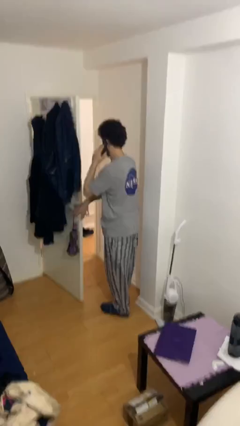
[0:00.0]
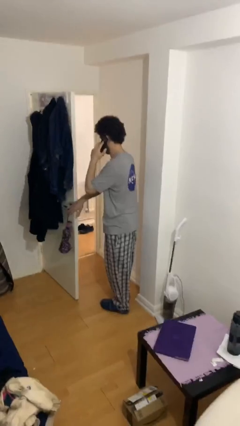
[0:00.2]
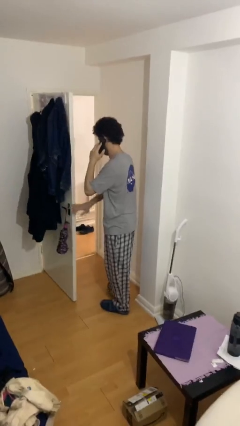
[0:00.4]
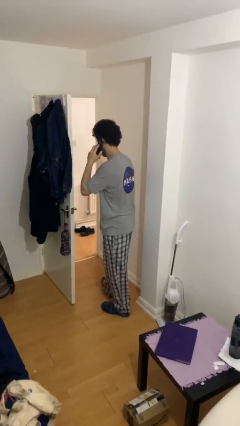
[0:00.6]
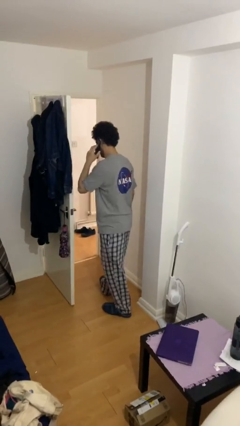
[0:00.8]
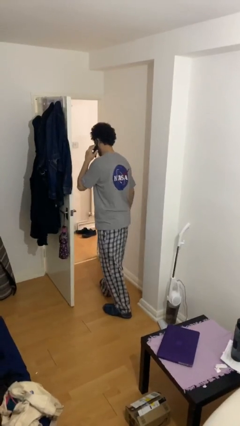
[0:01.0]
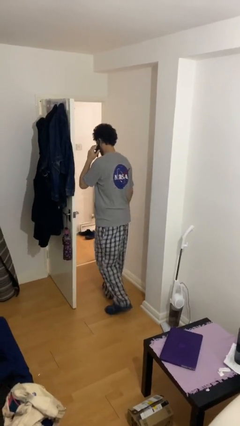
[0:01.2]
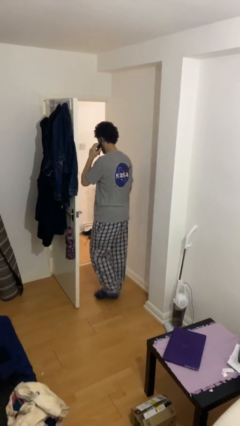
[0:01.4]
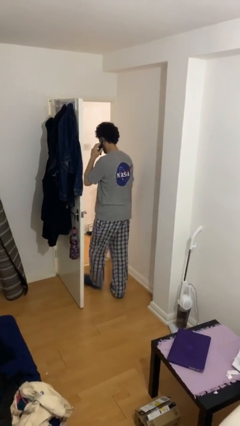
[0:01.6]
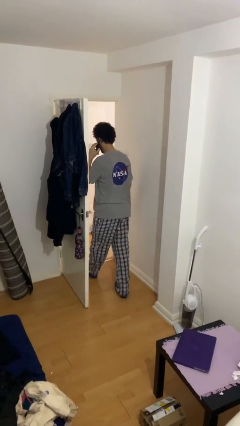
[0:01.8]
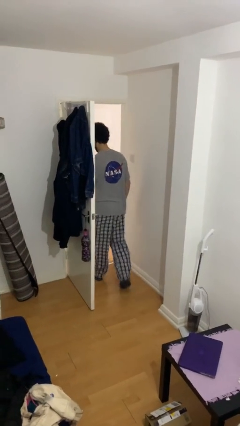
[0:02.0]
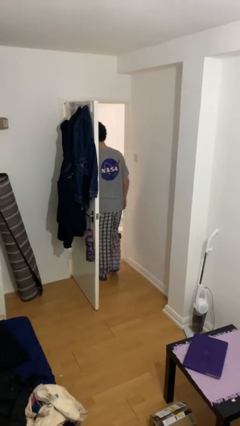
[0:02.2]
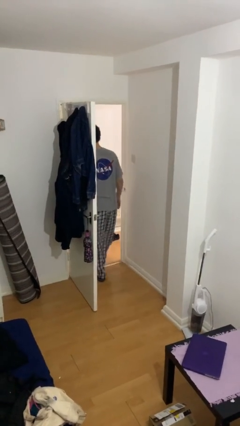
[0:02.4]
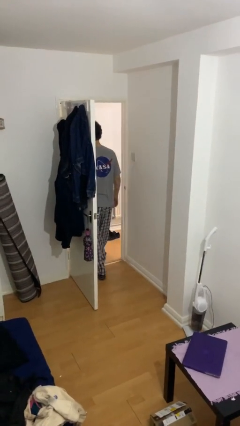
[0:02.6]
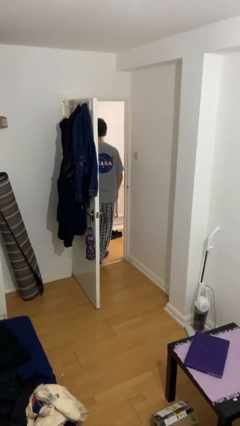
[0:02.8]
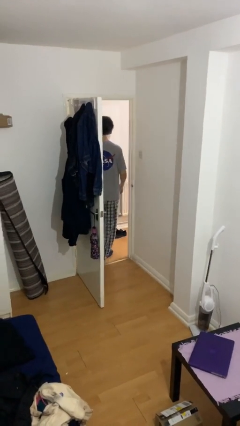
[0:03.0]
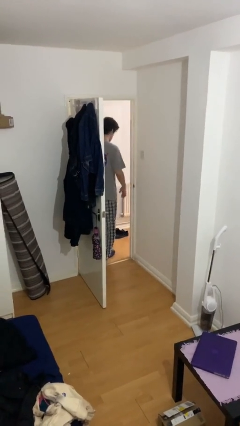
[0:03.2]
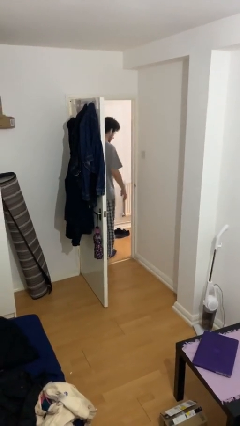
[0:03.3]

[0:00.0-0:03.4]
person exits scene through structure

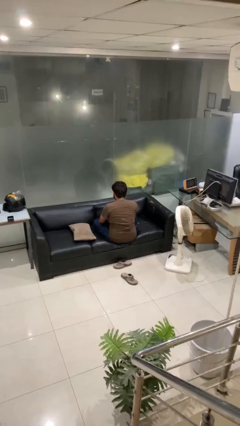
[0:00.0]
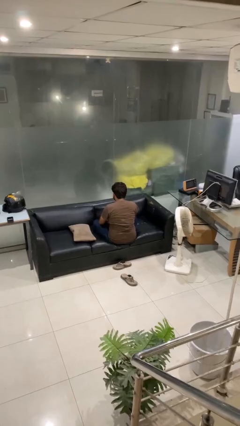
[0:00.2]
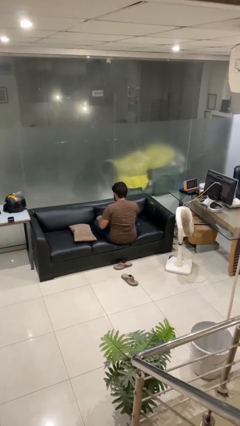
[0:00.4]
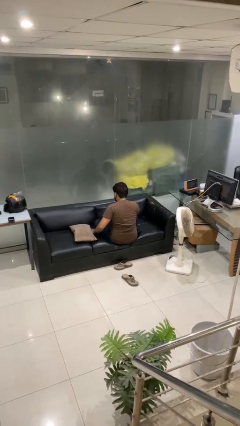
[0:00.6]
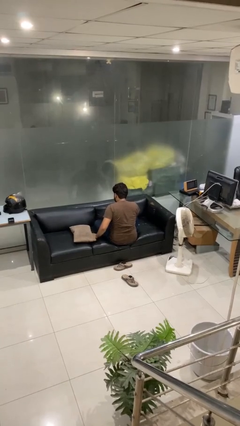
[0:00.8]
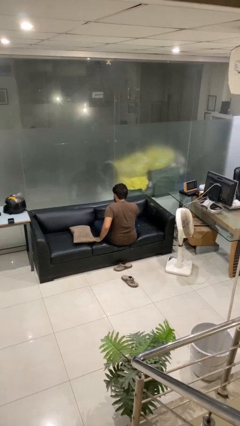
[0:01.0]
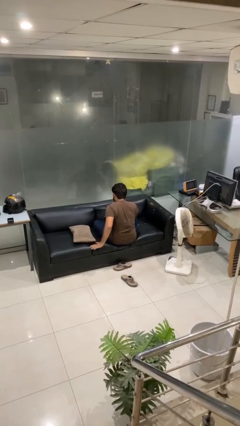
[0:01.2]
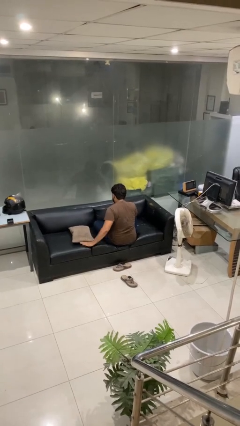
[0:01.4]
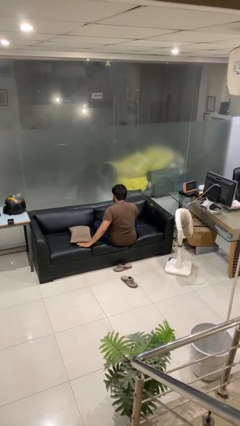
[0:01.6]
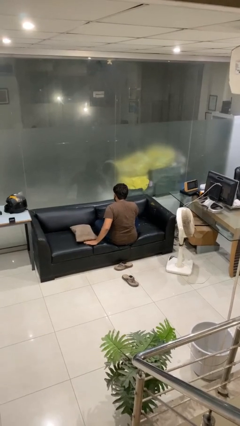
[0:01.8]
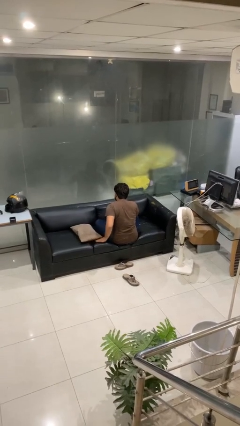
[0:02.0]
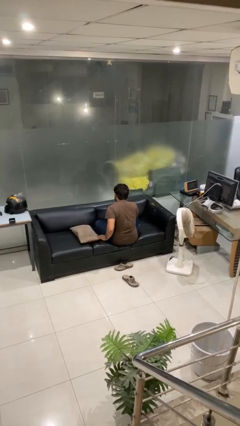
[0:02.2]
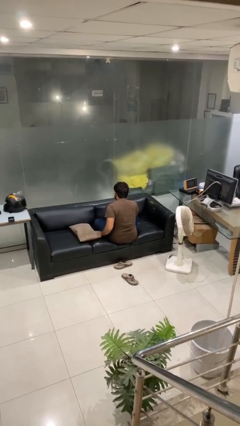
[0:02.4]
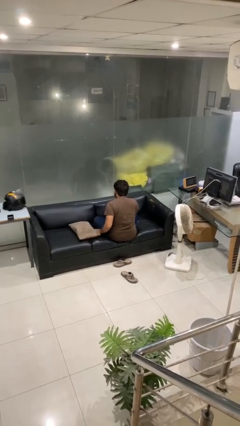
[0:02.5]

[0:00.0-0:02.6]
person searches in couch

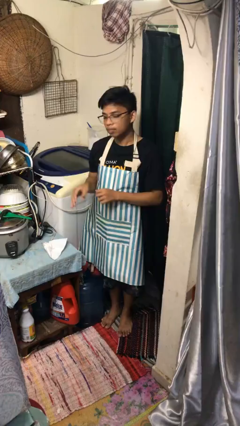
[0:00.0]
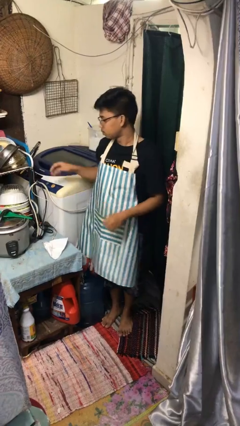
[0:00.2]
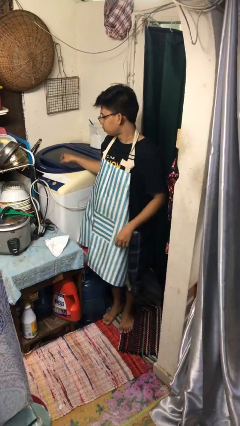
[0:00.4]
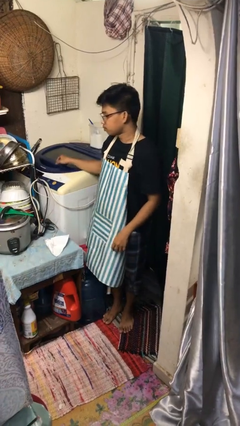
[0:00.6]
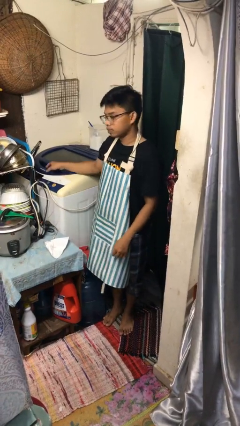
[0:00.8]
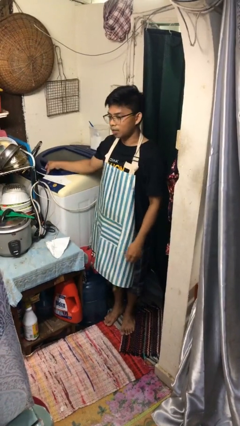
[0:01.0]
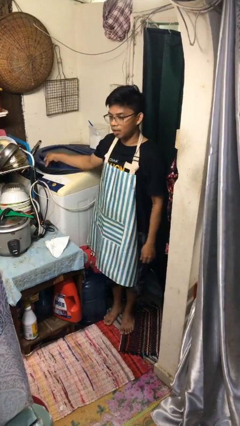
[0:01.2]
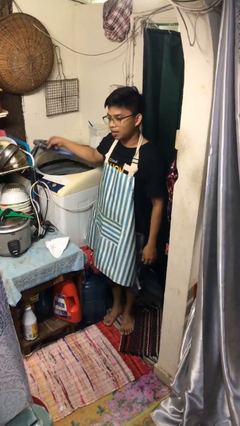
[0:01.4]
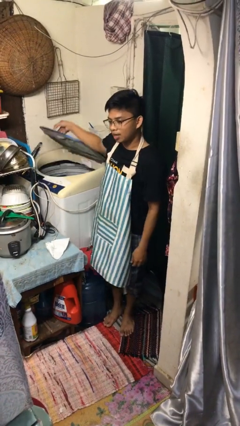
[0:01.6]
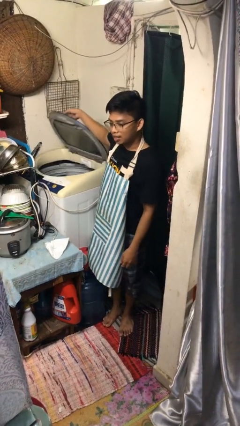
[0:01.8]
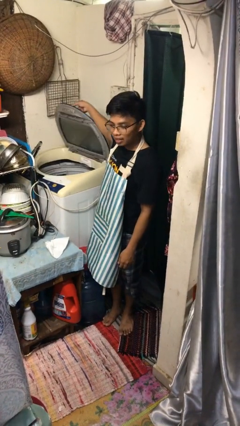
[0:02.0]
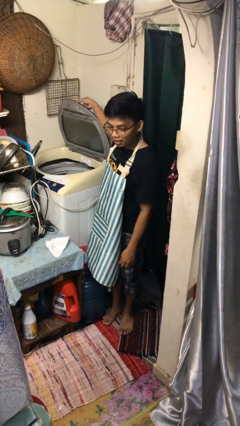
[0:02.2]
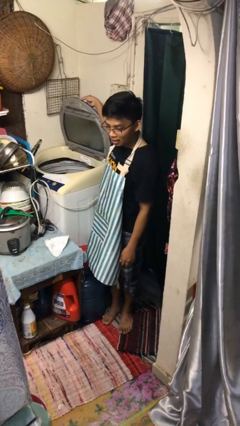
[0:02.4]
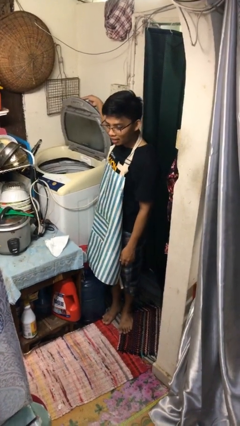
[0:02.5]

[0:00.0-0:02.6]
person opens clothes washer

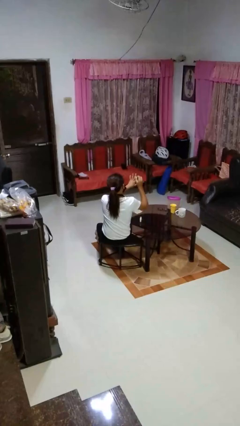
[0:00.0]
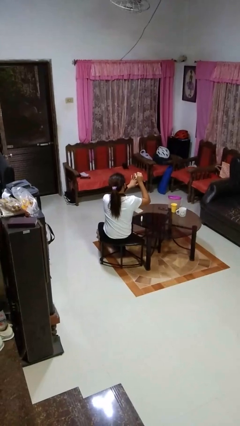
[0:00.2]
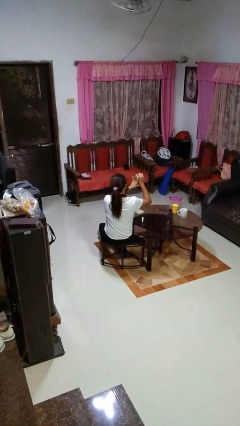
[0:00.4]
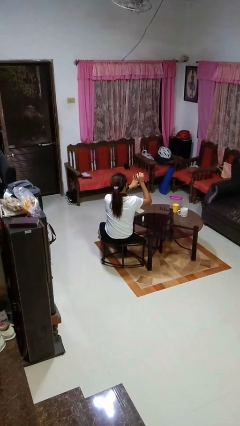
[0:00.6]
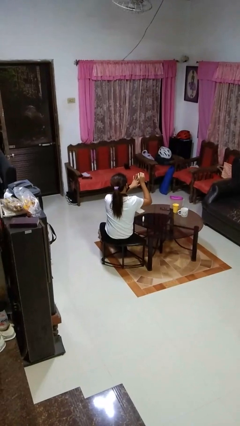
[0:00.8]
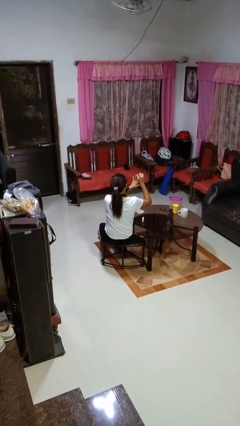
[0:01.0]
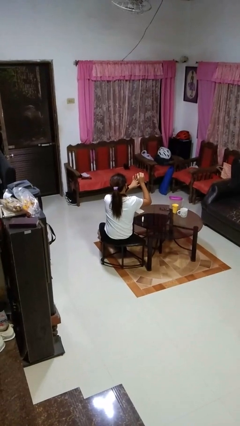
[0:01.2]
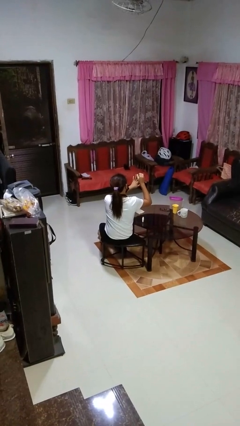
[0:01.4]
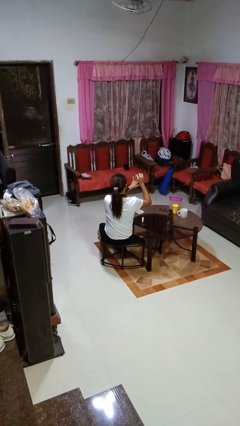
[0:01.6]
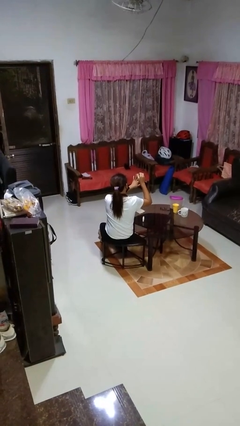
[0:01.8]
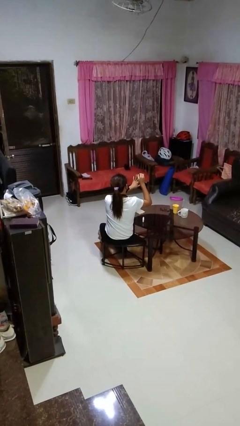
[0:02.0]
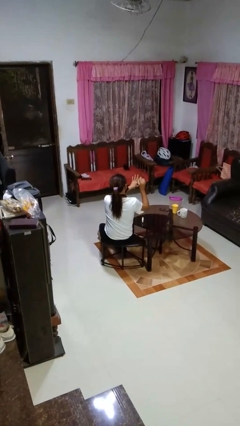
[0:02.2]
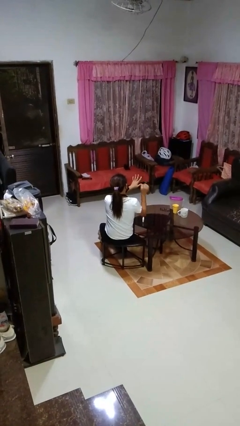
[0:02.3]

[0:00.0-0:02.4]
person paints fingernails

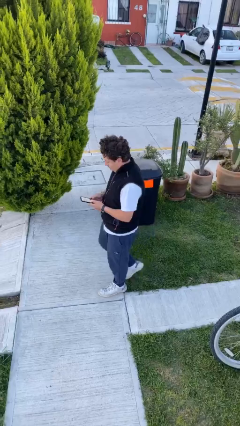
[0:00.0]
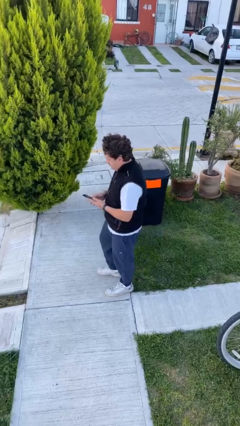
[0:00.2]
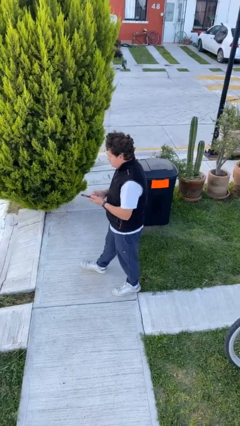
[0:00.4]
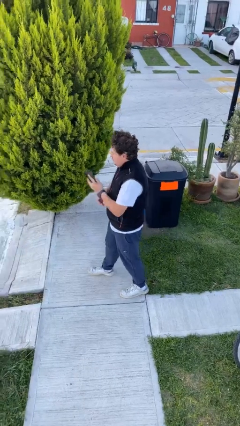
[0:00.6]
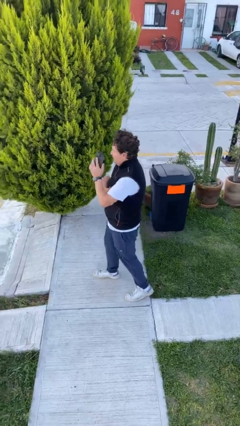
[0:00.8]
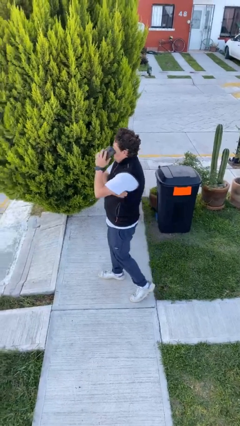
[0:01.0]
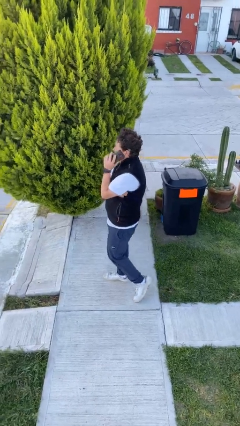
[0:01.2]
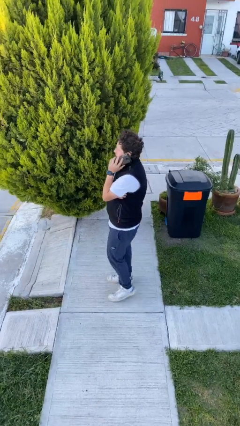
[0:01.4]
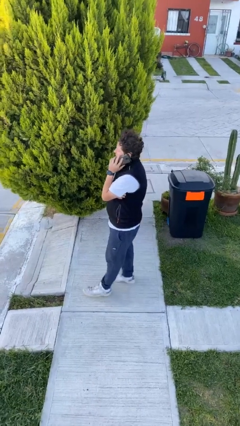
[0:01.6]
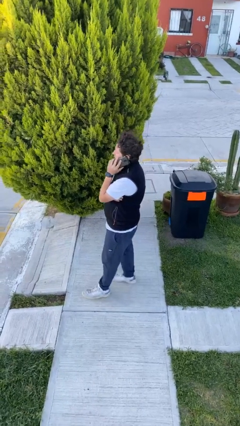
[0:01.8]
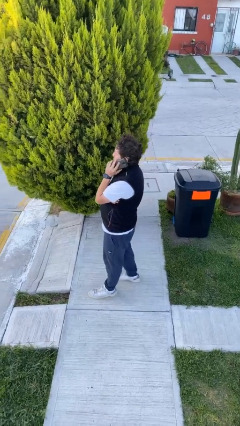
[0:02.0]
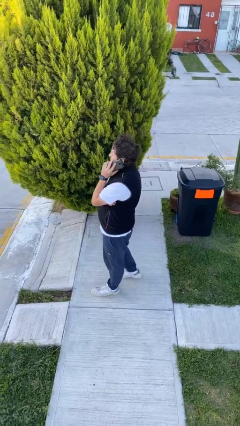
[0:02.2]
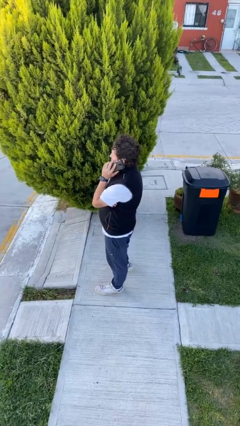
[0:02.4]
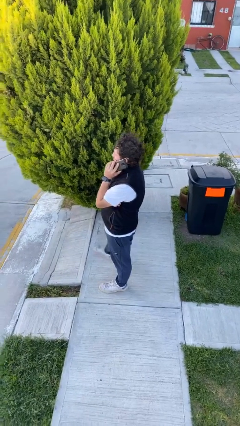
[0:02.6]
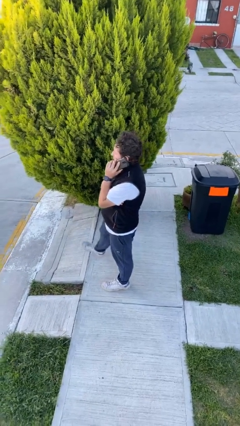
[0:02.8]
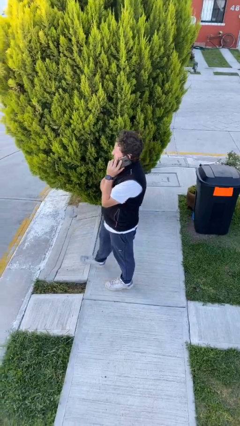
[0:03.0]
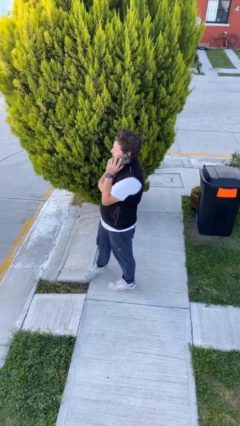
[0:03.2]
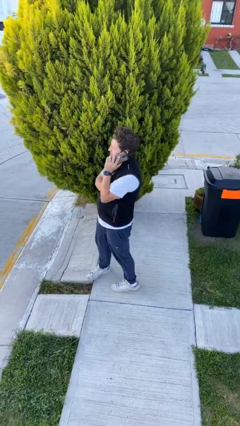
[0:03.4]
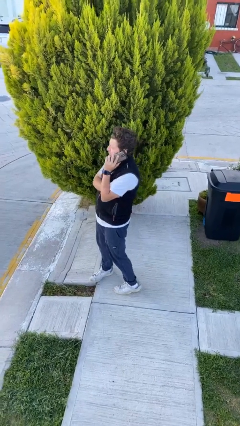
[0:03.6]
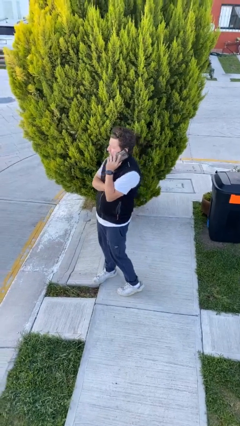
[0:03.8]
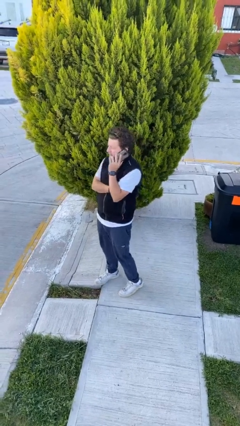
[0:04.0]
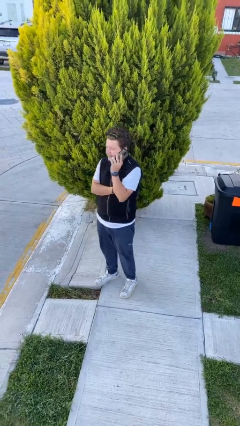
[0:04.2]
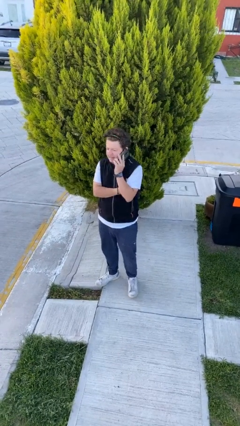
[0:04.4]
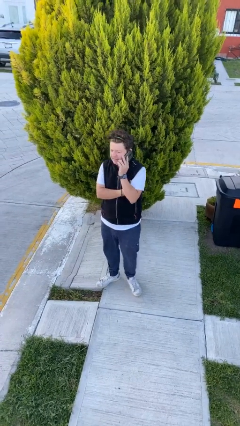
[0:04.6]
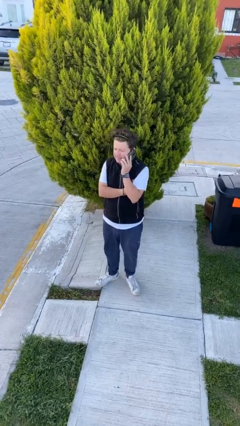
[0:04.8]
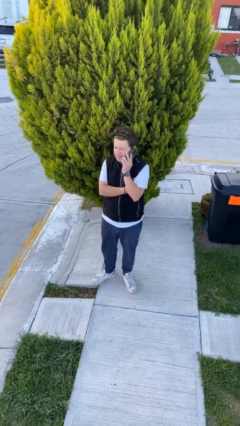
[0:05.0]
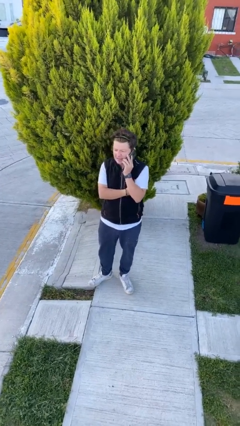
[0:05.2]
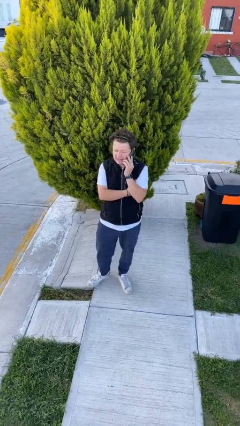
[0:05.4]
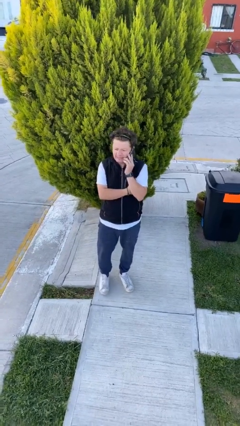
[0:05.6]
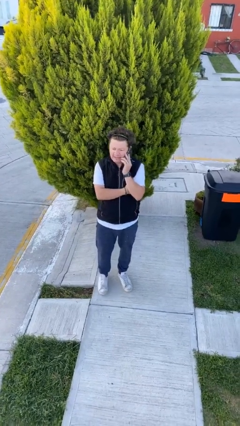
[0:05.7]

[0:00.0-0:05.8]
person talks on phone

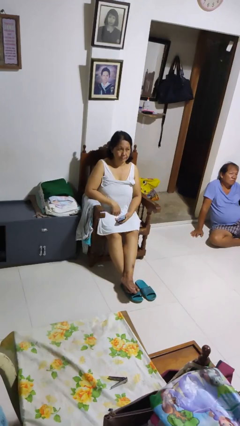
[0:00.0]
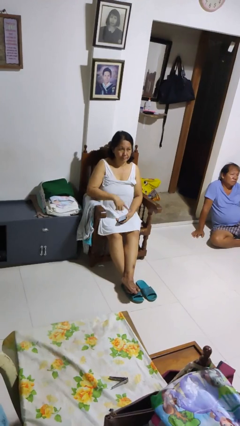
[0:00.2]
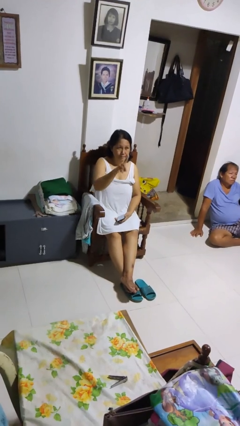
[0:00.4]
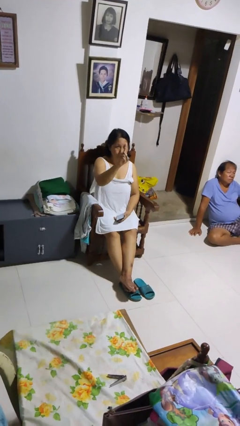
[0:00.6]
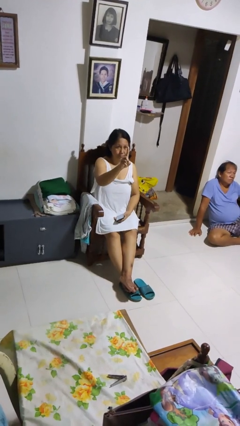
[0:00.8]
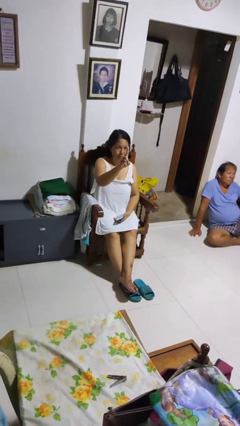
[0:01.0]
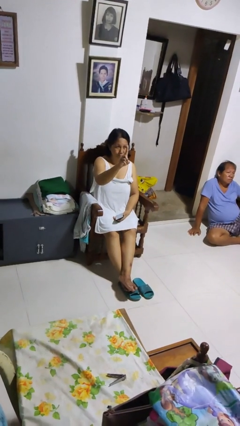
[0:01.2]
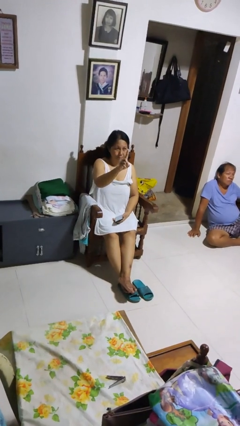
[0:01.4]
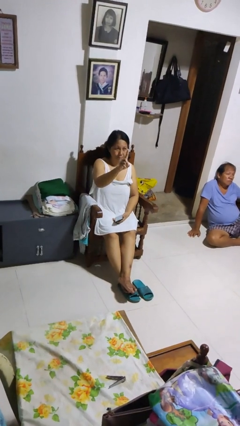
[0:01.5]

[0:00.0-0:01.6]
person gestures number one
